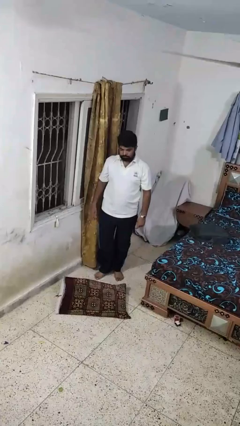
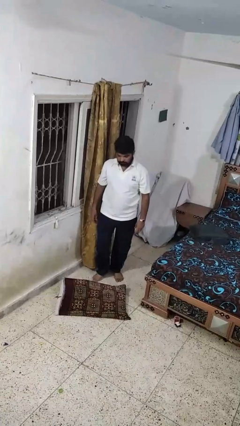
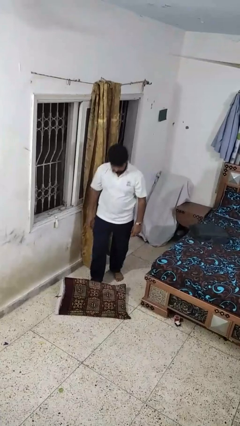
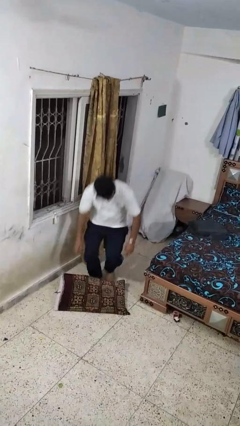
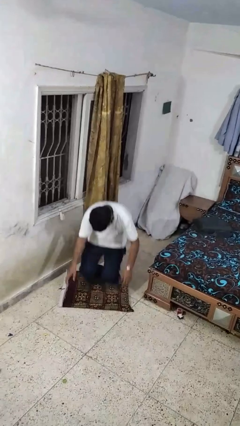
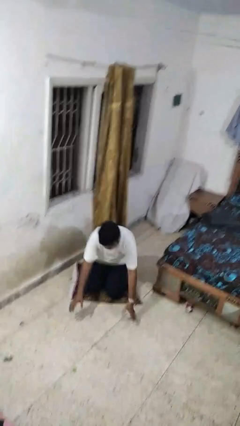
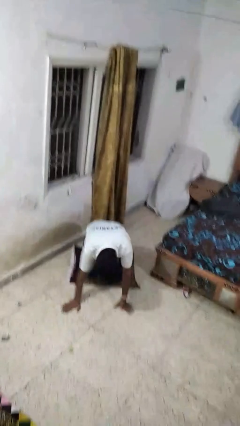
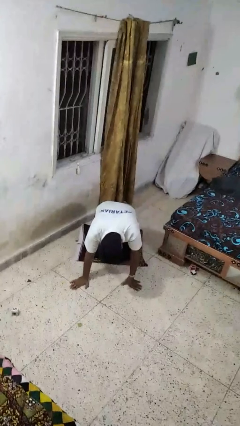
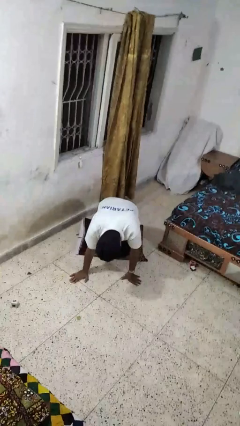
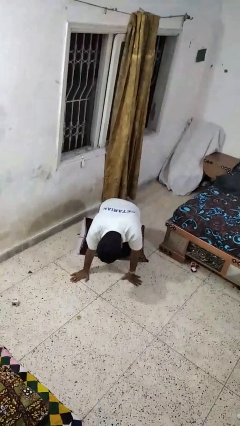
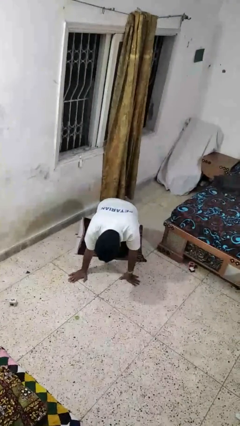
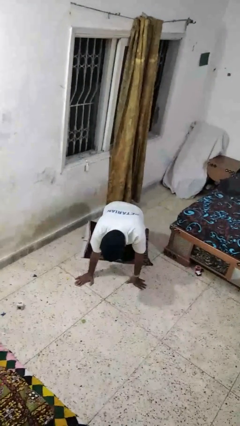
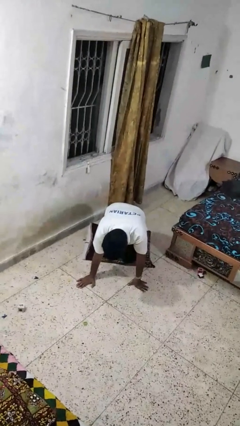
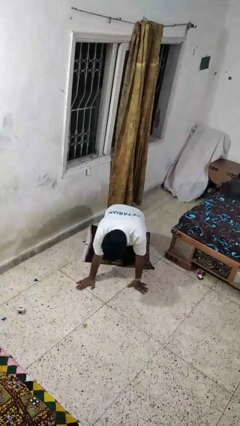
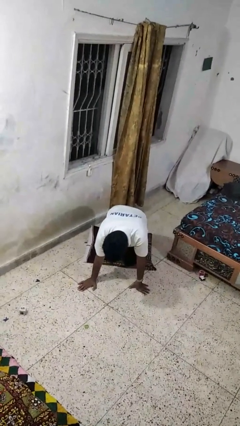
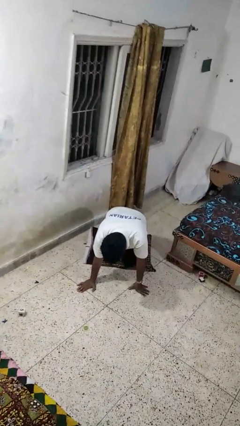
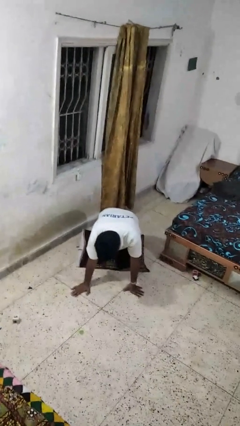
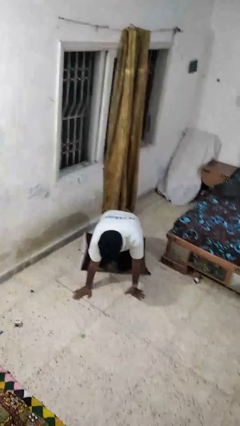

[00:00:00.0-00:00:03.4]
person trips on object on floor

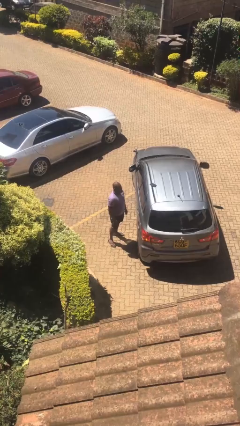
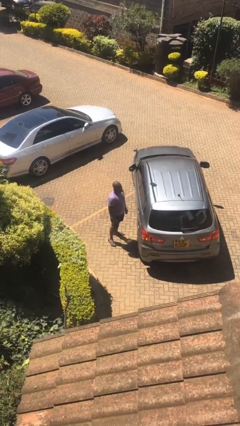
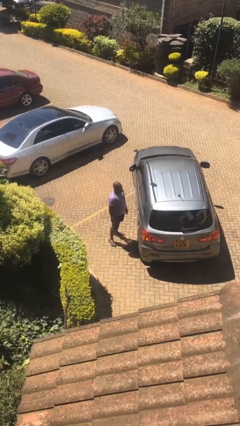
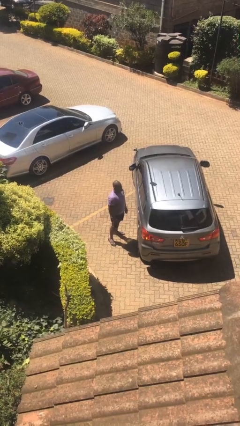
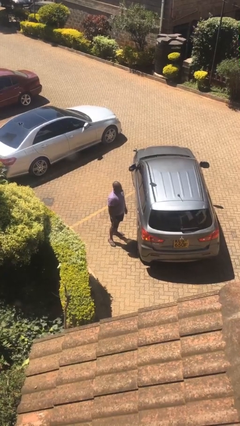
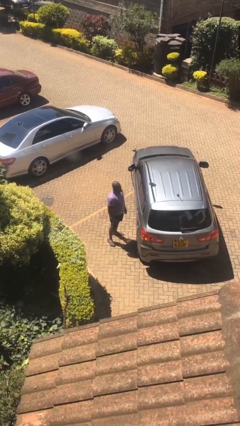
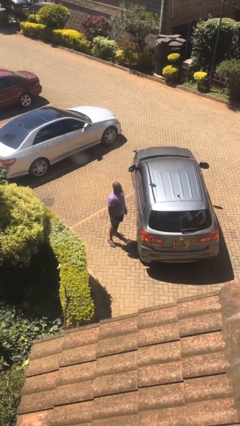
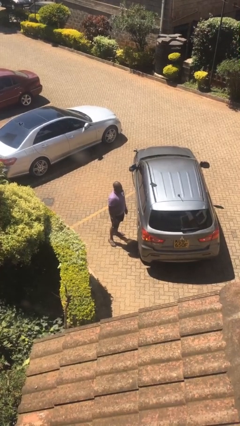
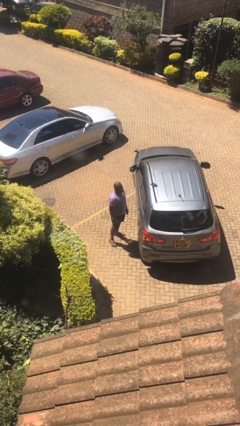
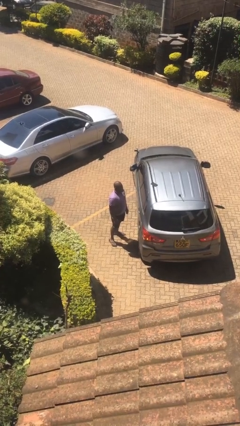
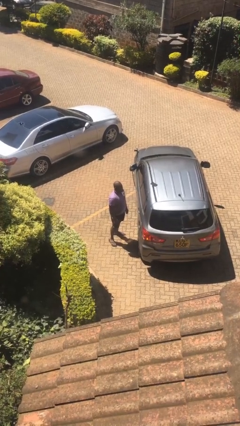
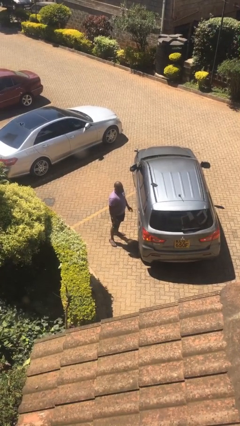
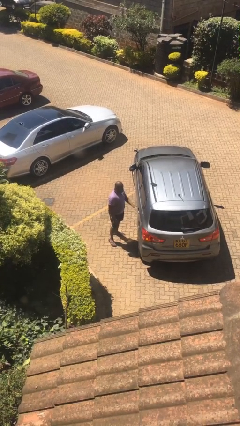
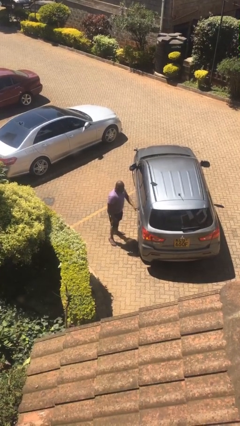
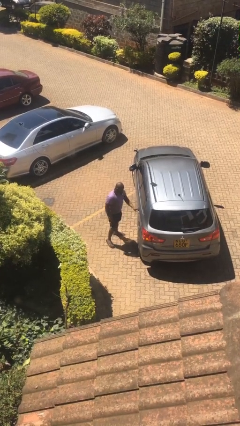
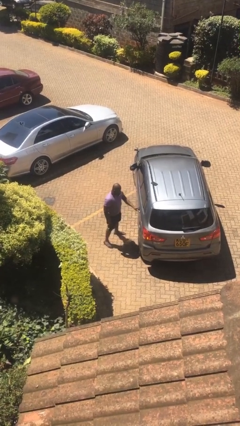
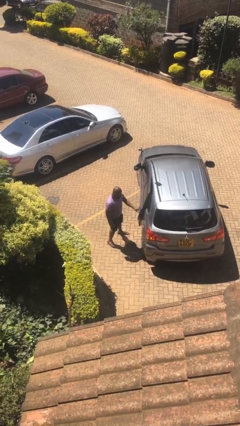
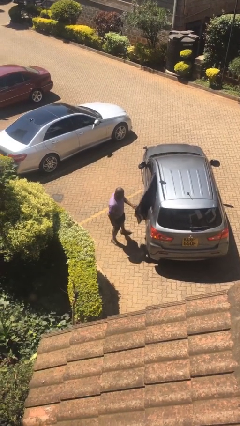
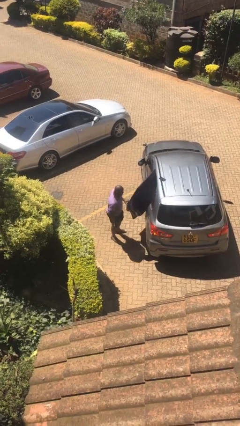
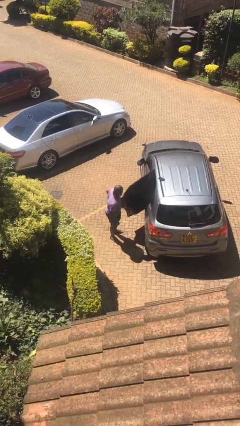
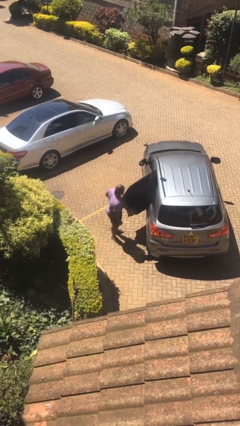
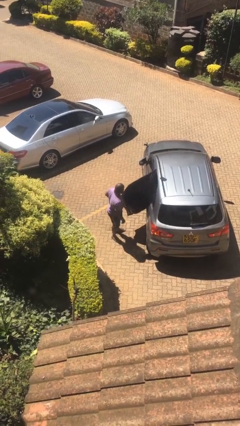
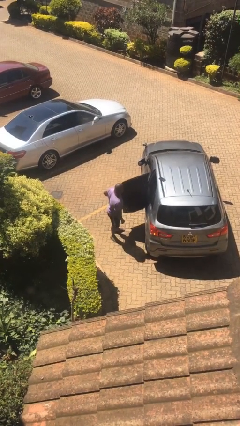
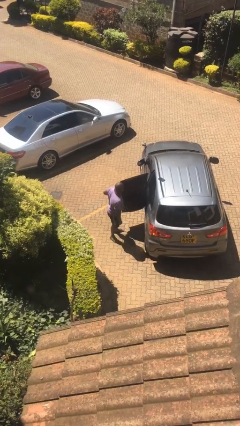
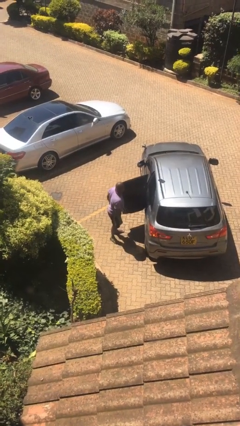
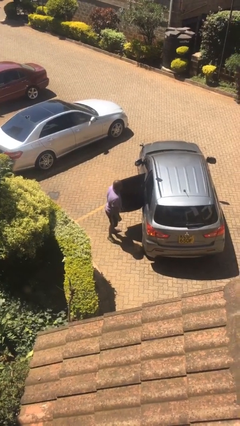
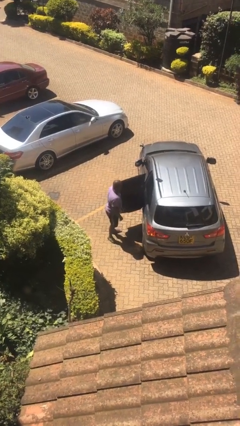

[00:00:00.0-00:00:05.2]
person opens car door

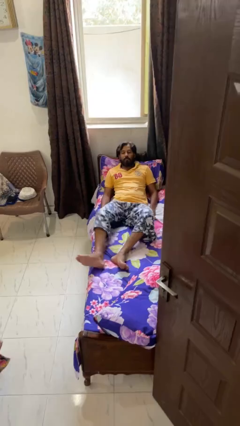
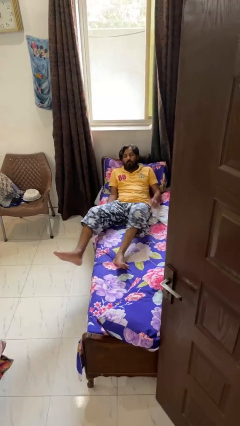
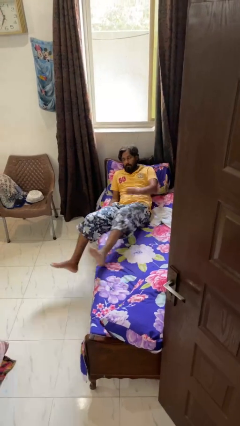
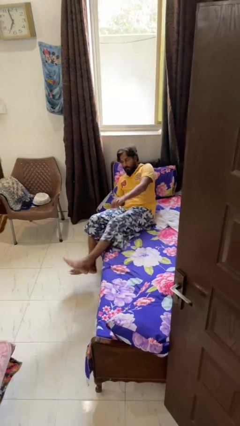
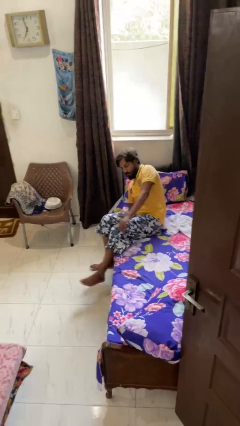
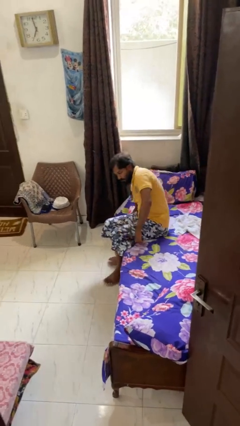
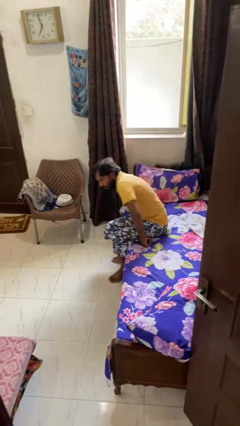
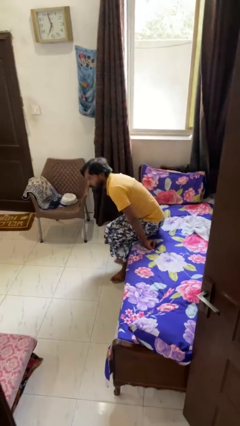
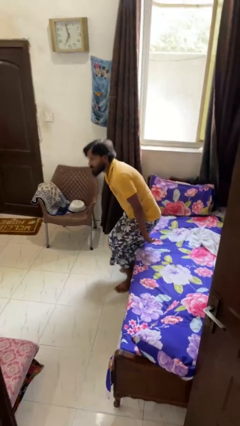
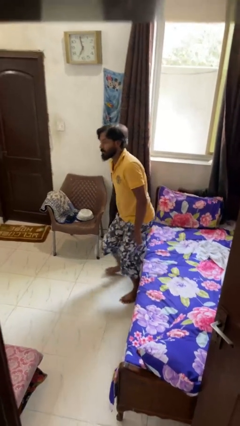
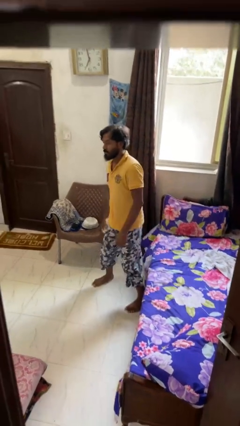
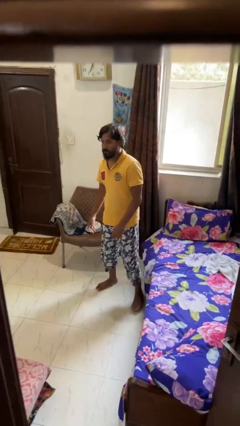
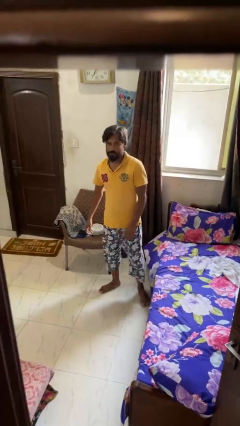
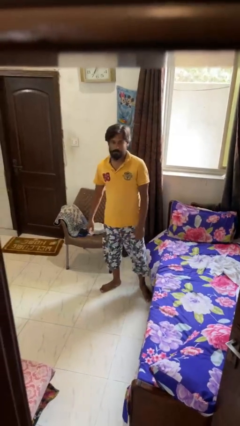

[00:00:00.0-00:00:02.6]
person stands up

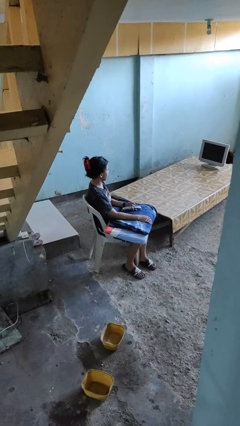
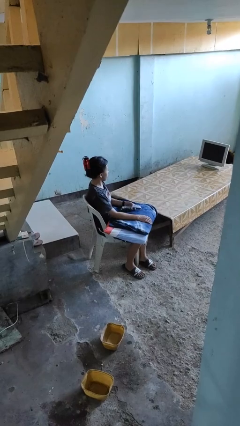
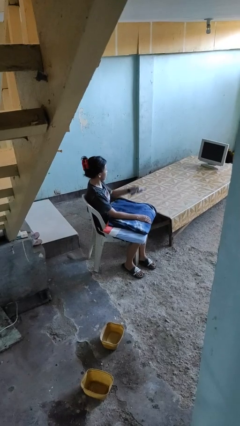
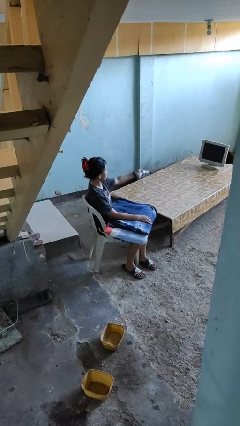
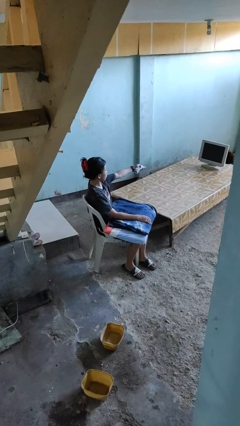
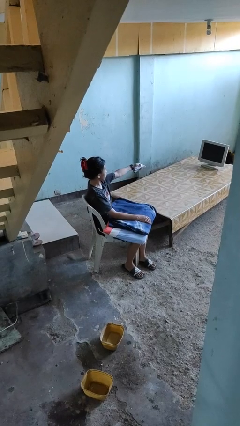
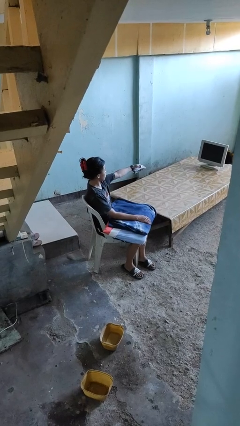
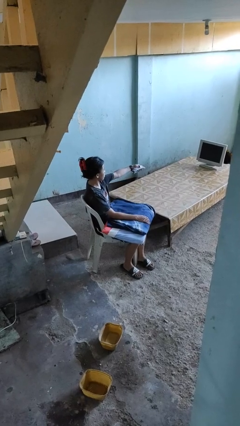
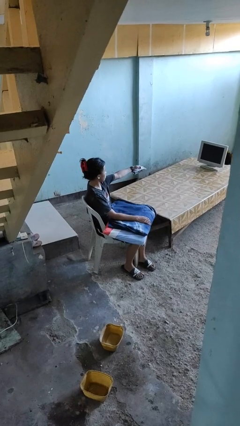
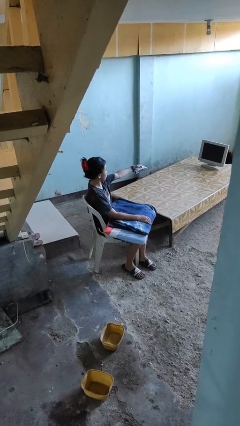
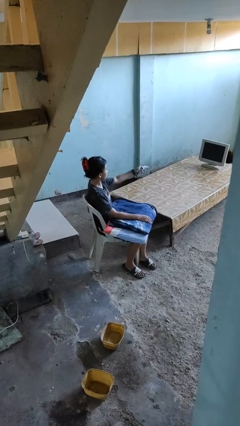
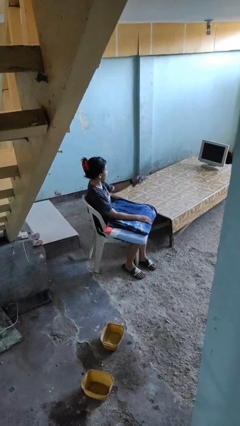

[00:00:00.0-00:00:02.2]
person uses television remote

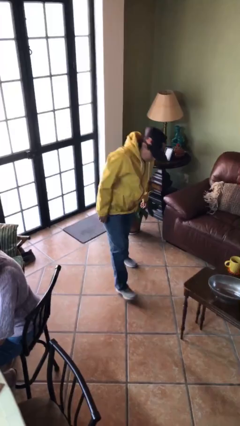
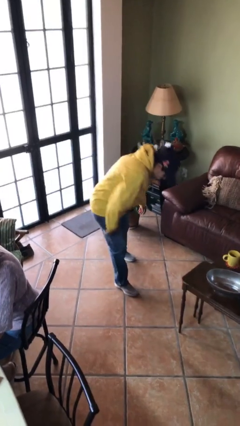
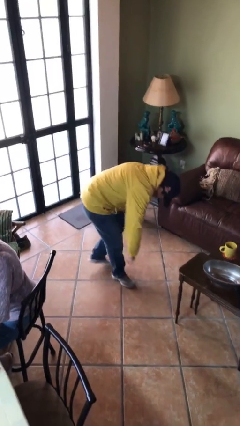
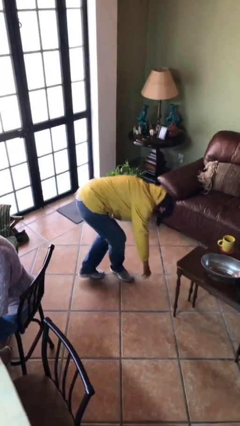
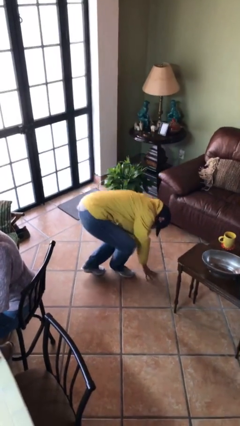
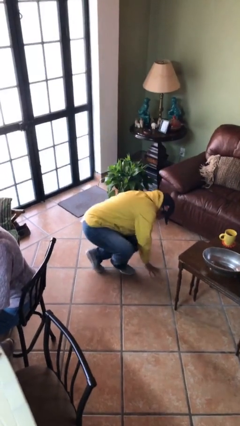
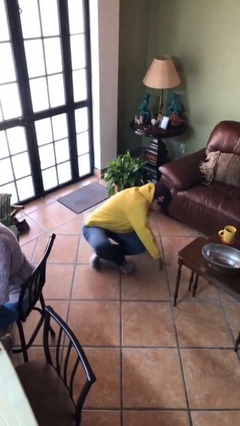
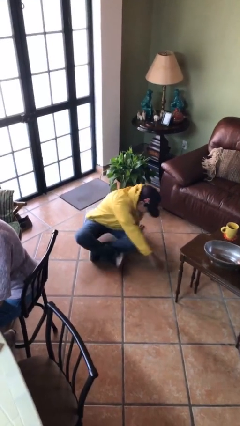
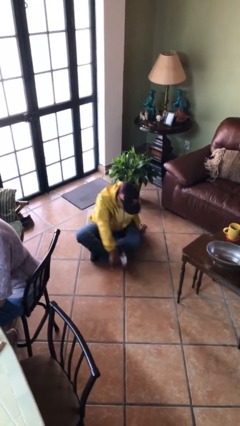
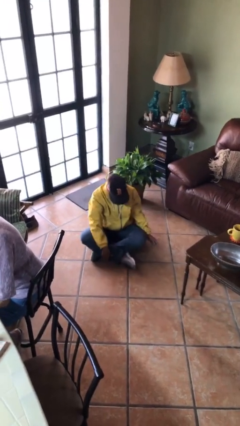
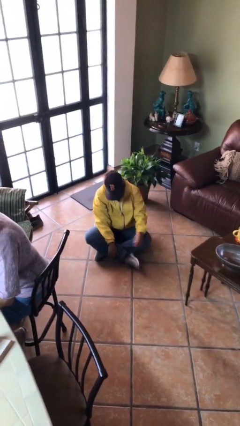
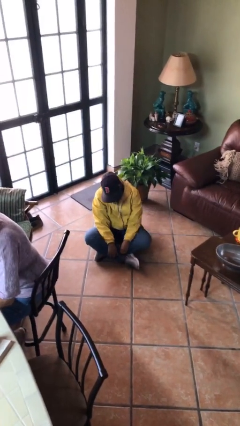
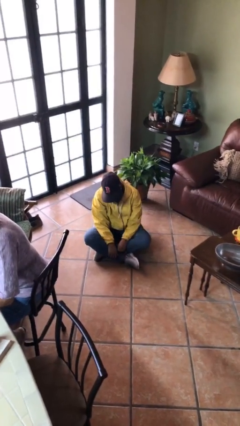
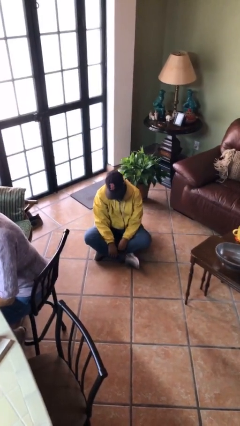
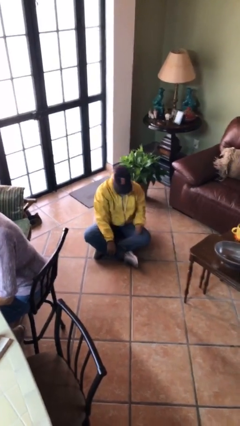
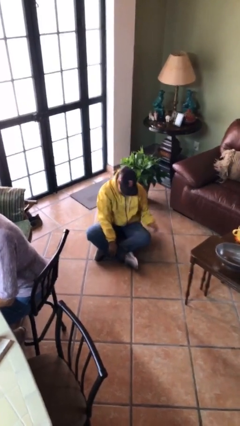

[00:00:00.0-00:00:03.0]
person sits crisscross

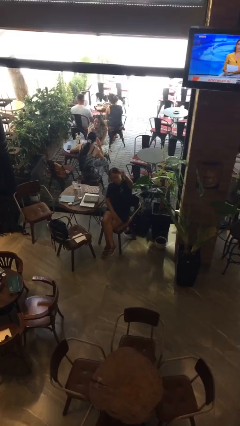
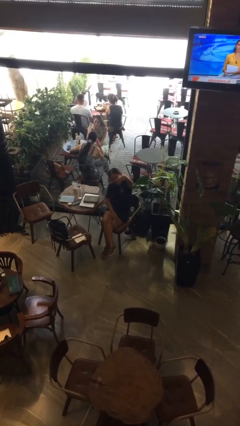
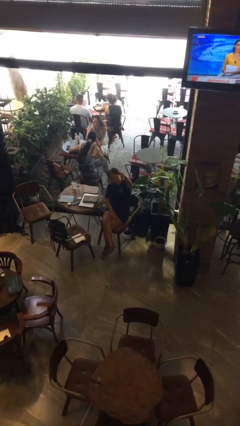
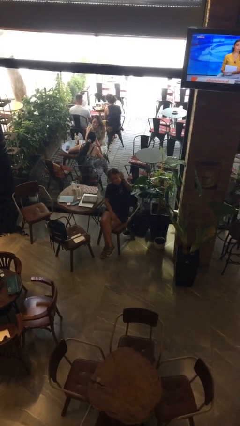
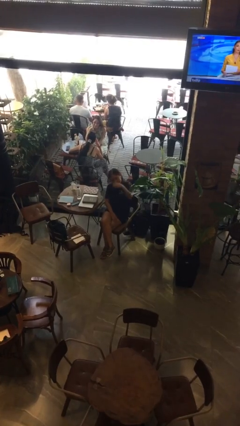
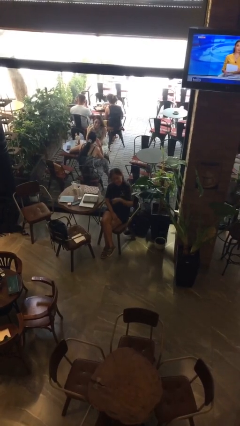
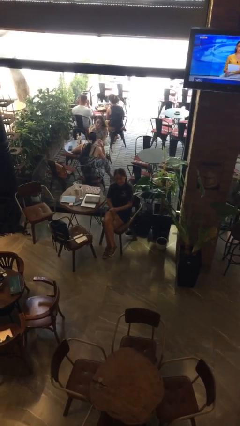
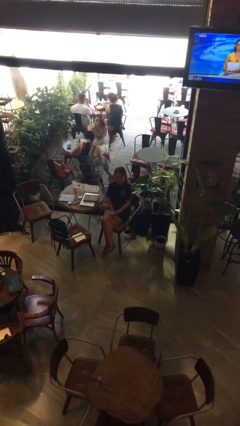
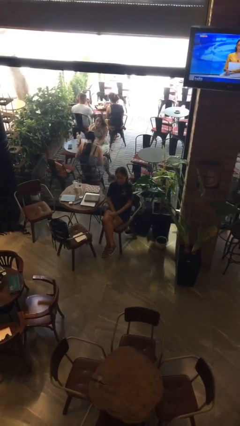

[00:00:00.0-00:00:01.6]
person gestures come here
